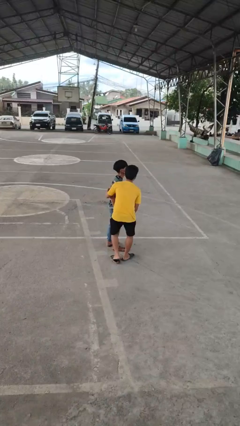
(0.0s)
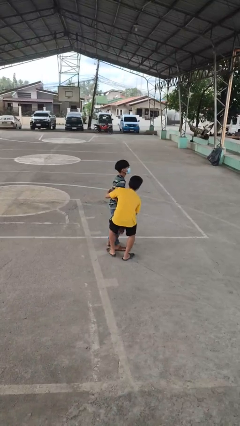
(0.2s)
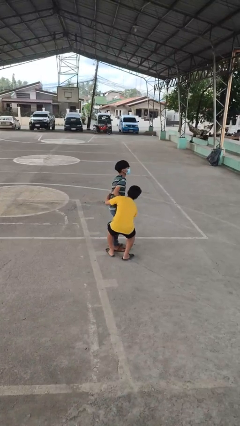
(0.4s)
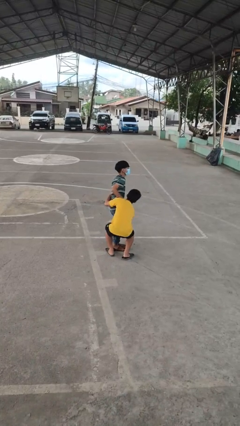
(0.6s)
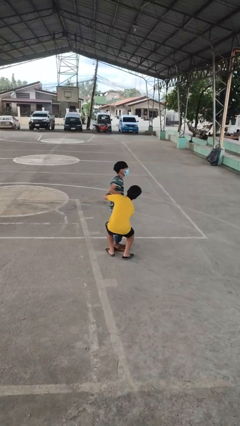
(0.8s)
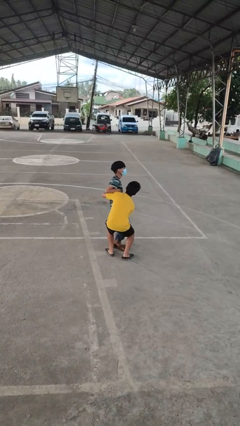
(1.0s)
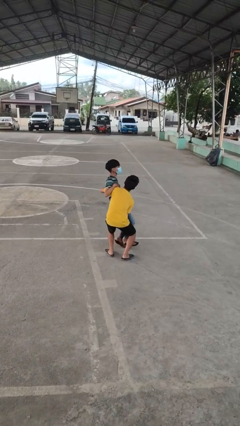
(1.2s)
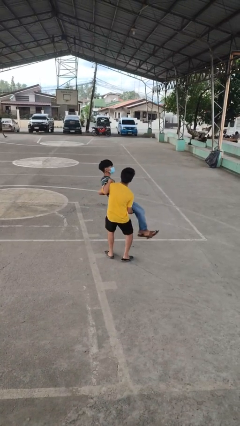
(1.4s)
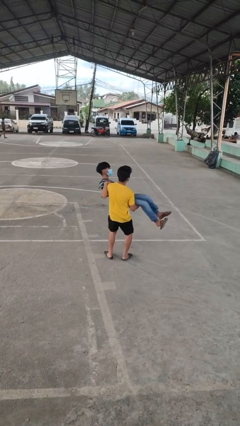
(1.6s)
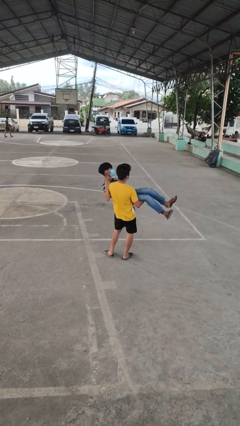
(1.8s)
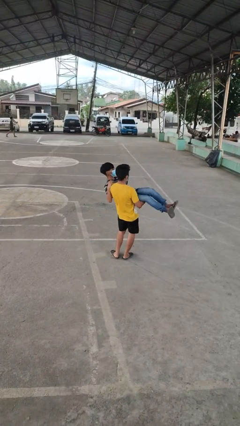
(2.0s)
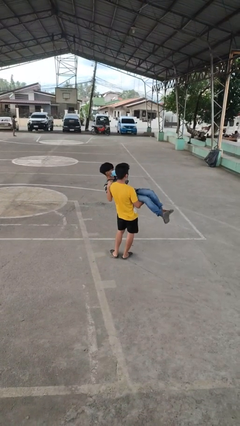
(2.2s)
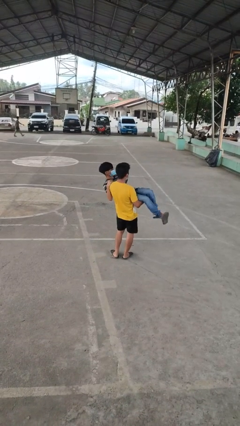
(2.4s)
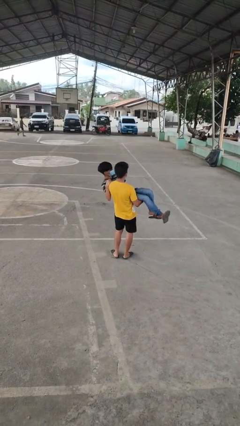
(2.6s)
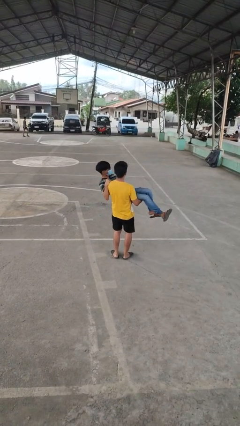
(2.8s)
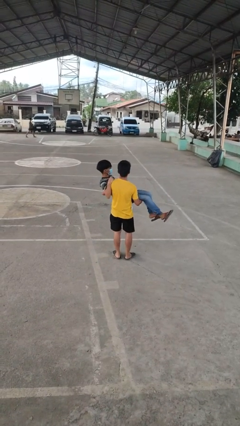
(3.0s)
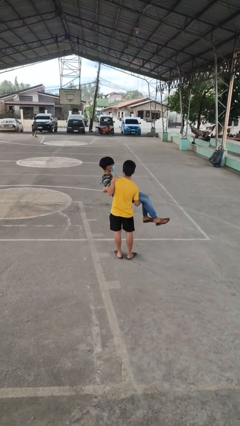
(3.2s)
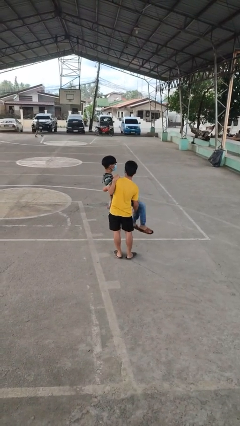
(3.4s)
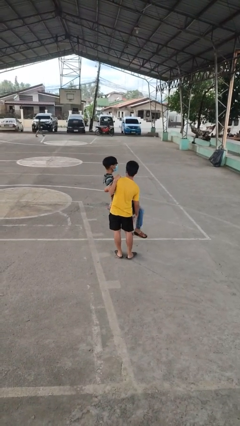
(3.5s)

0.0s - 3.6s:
person picks up person

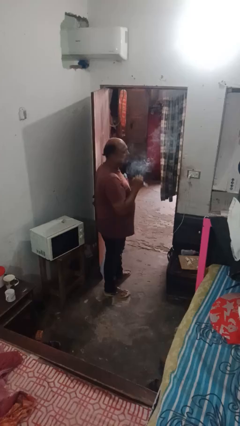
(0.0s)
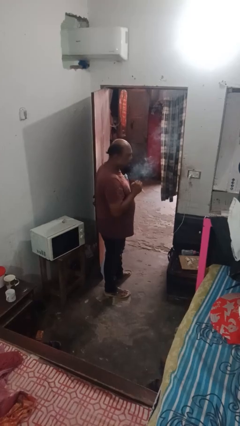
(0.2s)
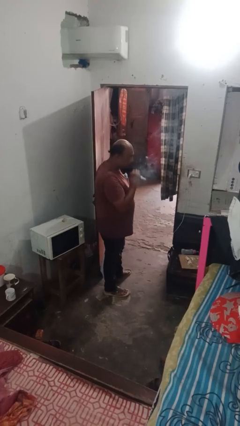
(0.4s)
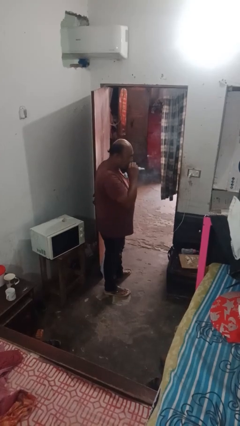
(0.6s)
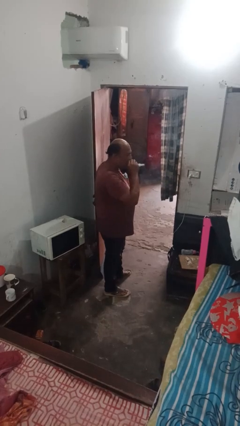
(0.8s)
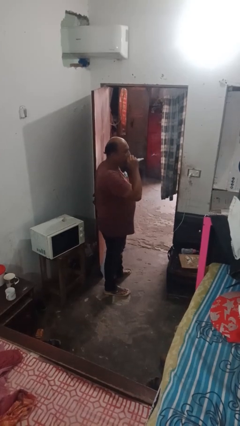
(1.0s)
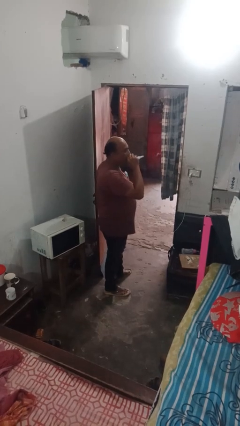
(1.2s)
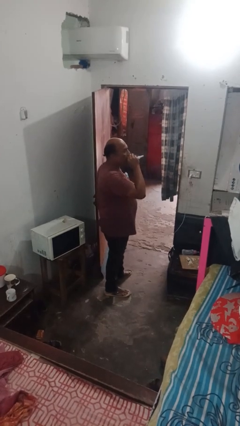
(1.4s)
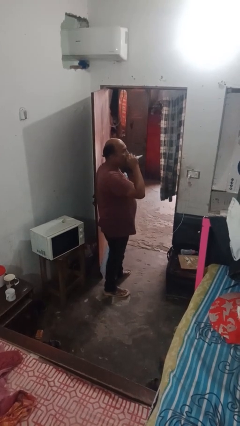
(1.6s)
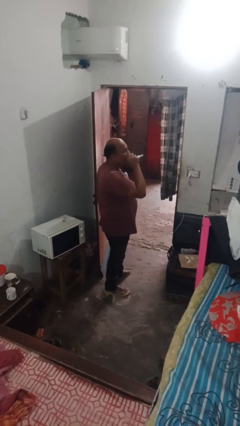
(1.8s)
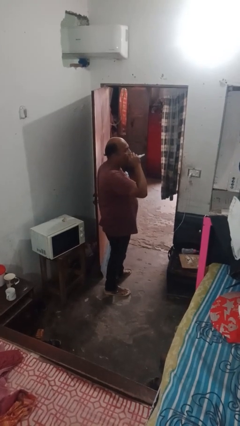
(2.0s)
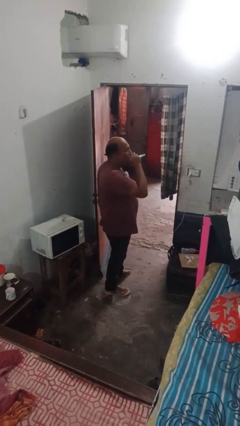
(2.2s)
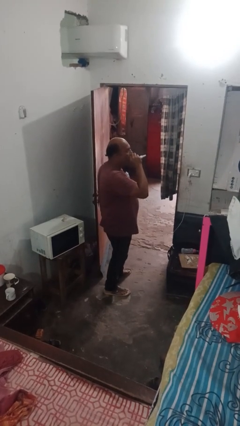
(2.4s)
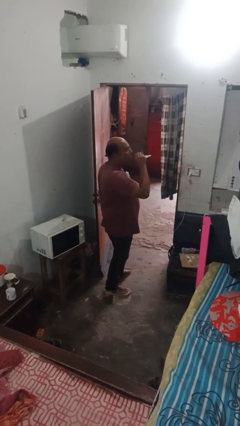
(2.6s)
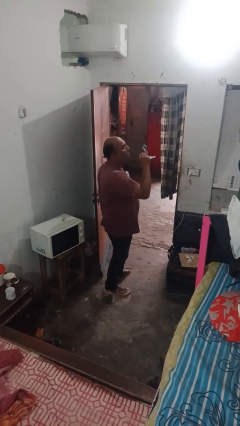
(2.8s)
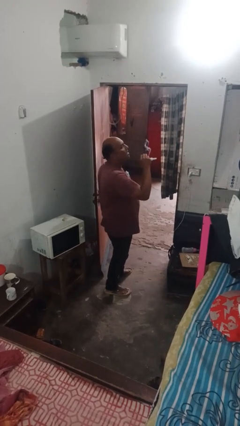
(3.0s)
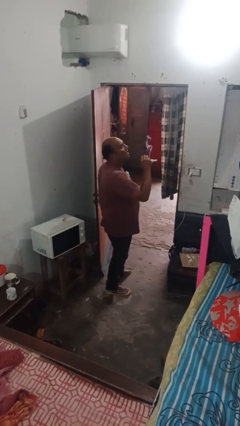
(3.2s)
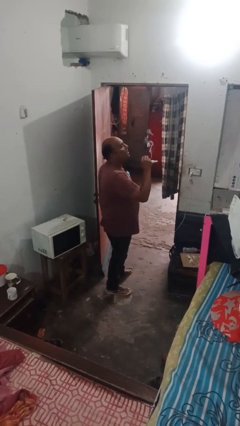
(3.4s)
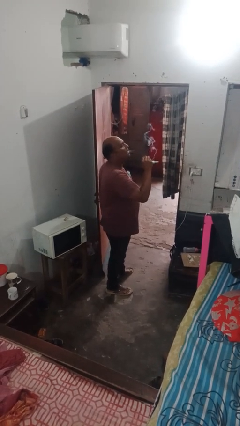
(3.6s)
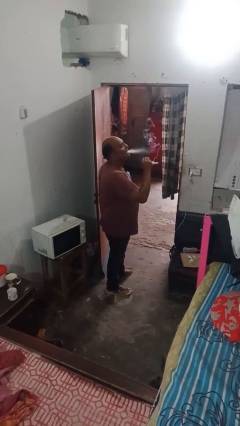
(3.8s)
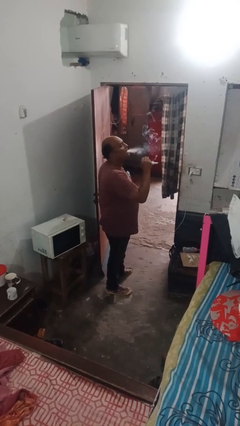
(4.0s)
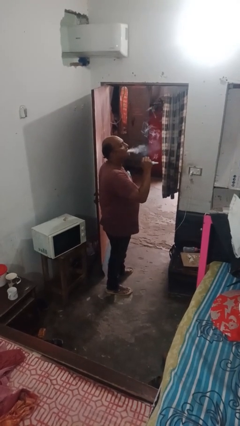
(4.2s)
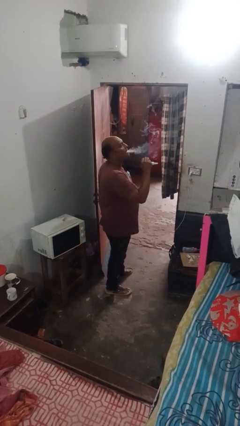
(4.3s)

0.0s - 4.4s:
person vapes

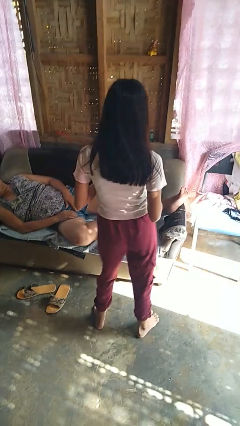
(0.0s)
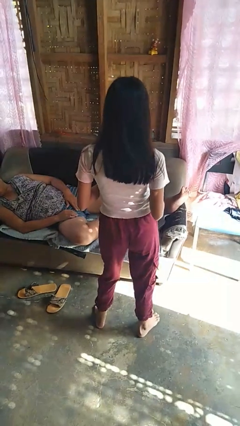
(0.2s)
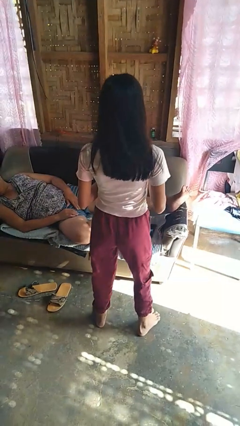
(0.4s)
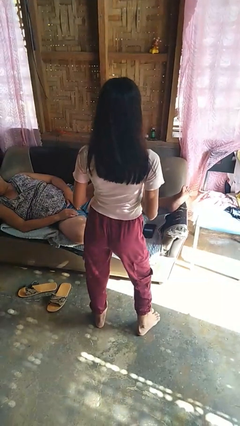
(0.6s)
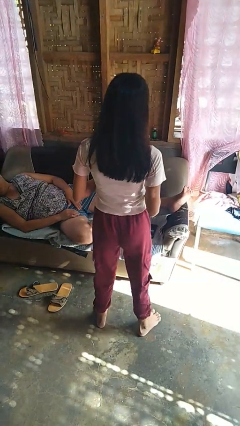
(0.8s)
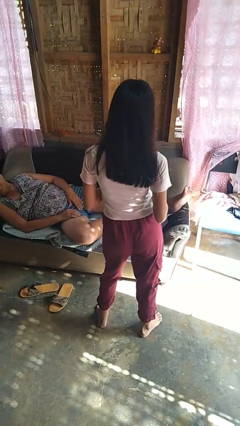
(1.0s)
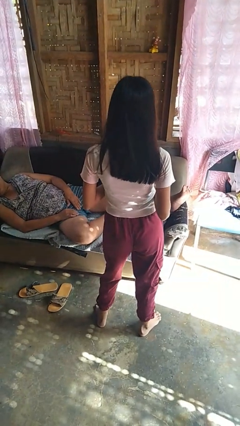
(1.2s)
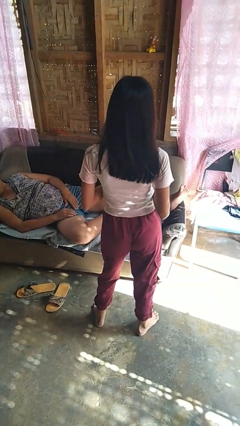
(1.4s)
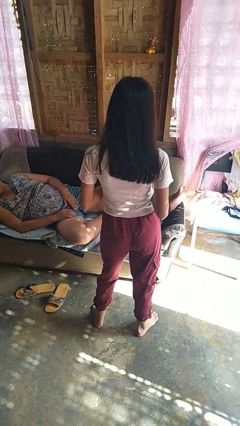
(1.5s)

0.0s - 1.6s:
person wiggles hips

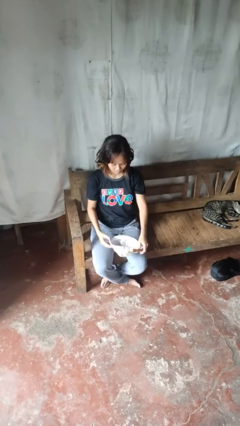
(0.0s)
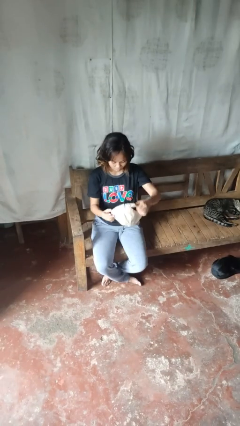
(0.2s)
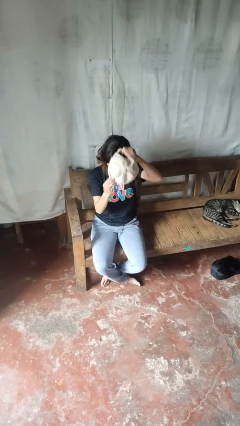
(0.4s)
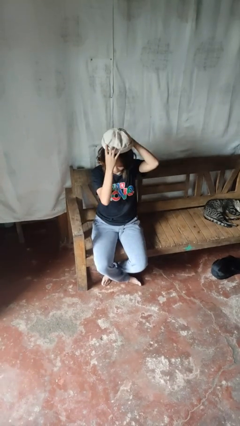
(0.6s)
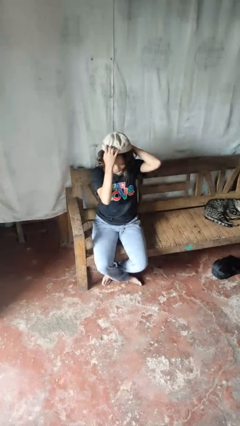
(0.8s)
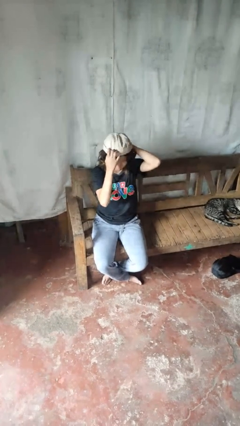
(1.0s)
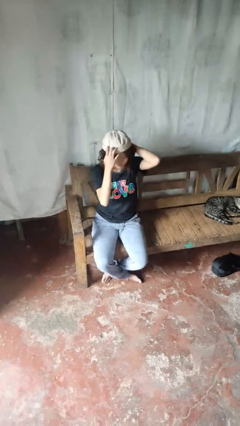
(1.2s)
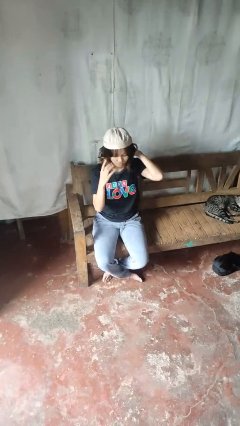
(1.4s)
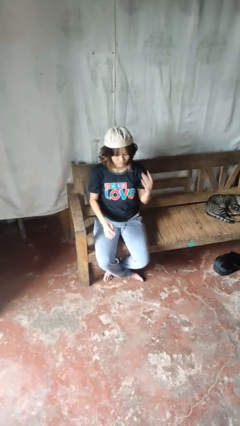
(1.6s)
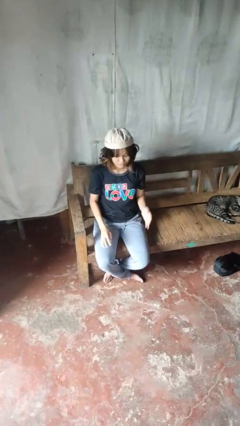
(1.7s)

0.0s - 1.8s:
person puts on hat

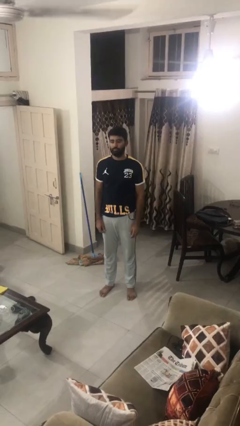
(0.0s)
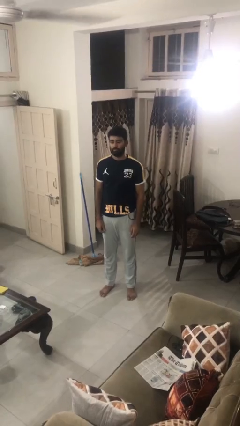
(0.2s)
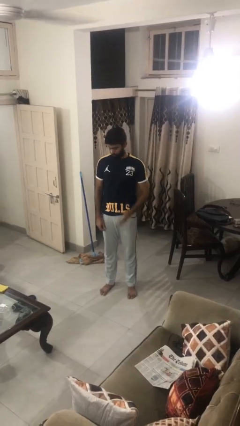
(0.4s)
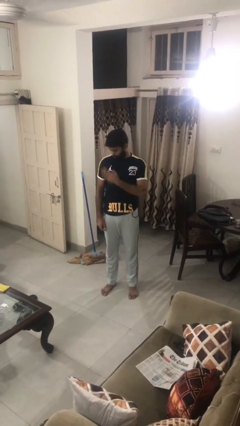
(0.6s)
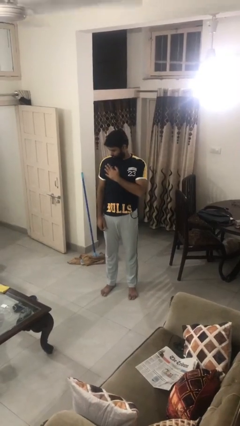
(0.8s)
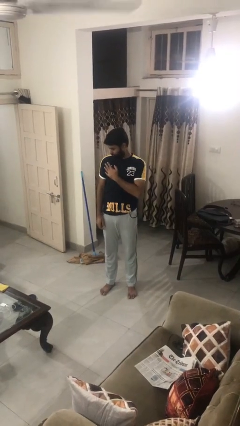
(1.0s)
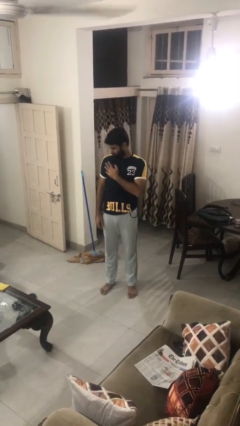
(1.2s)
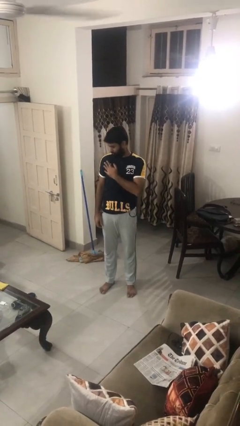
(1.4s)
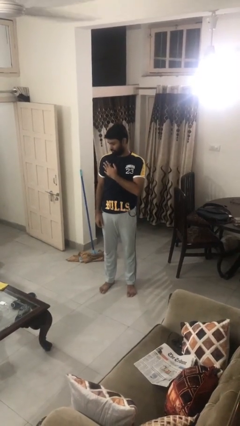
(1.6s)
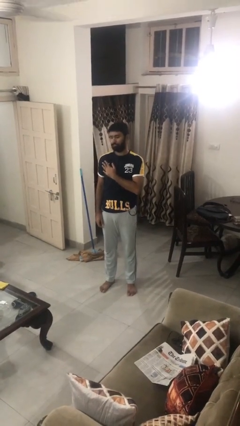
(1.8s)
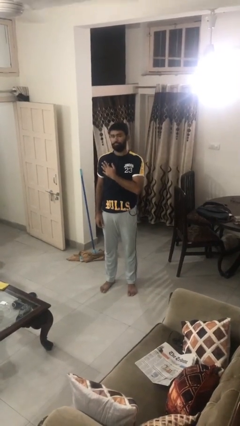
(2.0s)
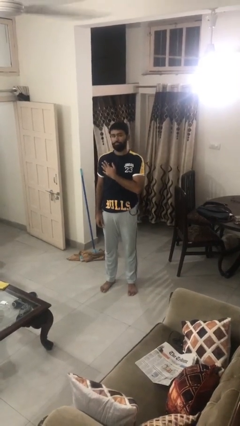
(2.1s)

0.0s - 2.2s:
person swats bug

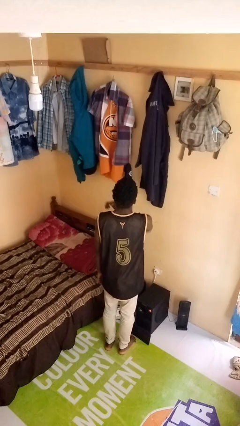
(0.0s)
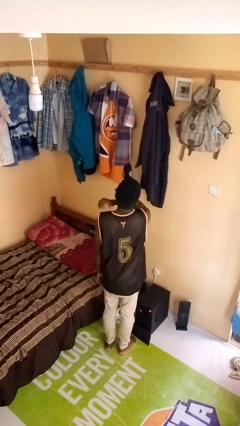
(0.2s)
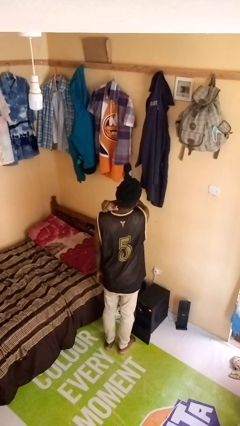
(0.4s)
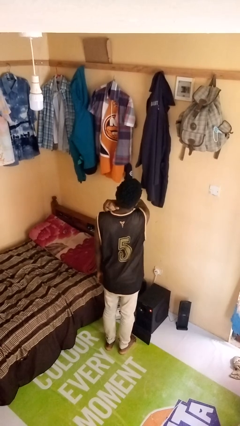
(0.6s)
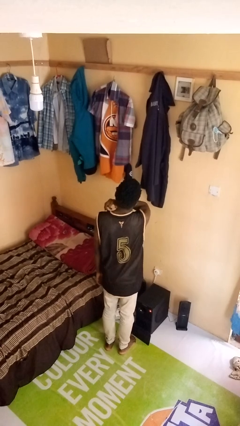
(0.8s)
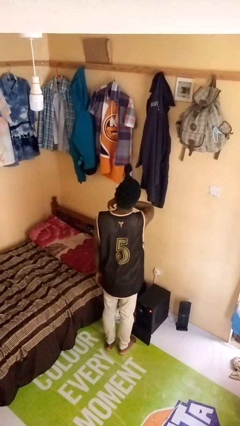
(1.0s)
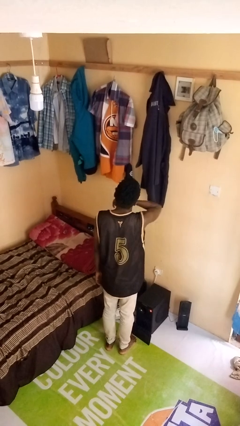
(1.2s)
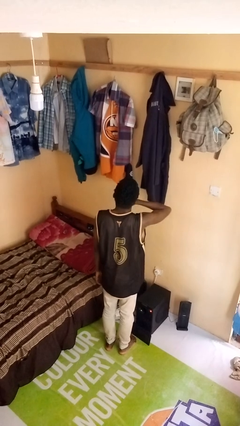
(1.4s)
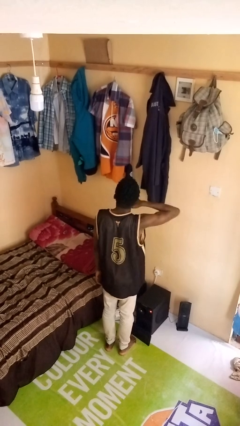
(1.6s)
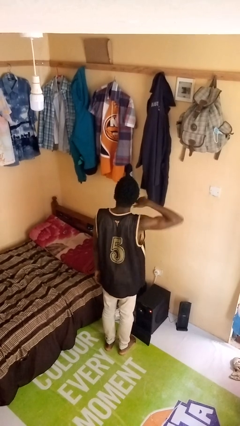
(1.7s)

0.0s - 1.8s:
person gestures cut

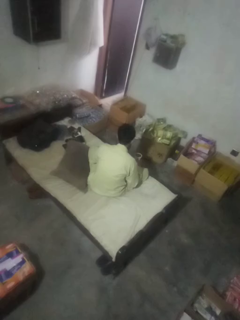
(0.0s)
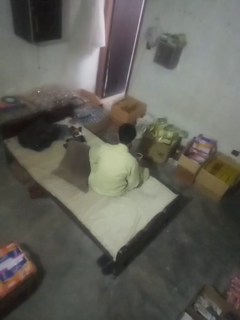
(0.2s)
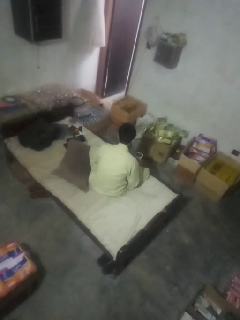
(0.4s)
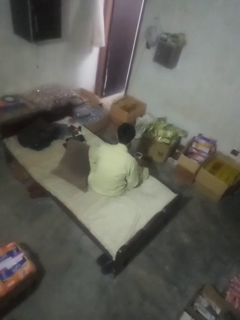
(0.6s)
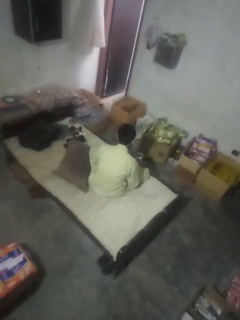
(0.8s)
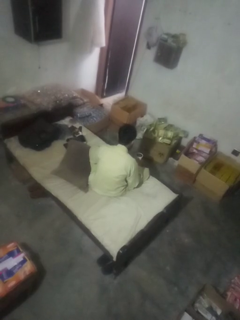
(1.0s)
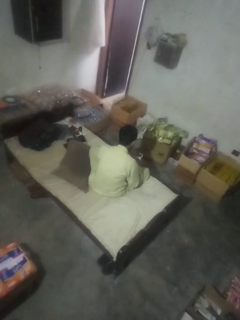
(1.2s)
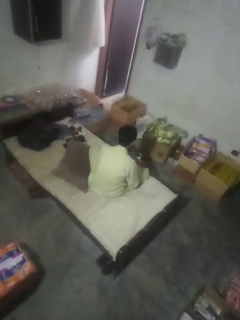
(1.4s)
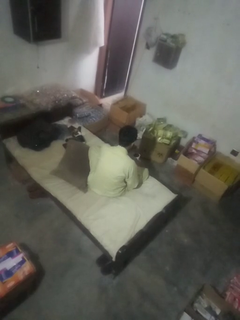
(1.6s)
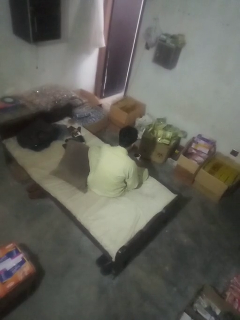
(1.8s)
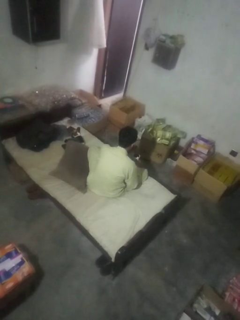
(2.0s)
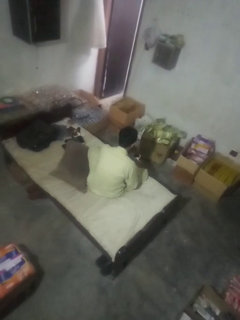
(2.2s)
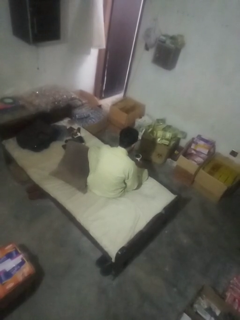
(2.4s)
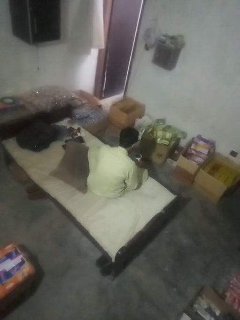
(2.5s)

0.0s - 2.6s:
person stirs mug
